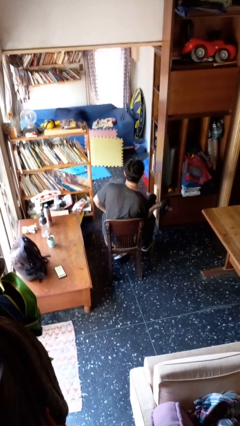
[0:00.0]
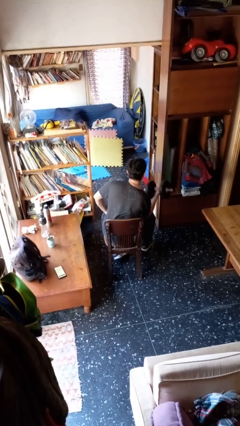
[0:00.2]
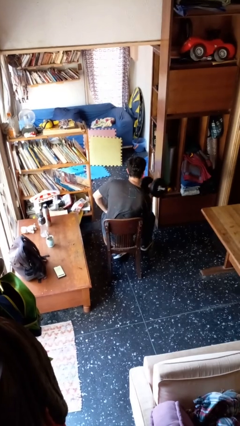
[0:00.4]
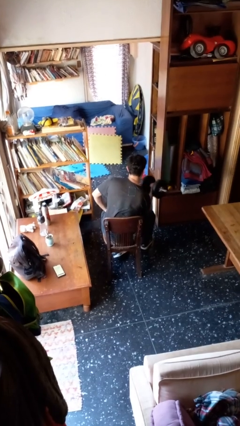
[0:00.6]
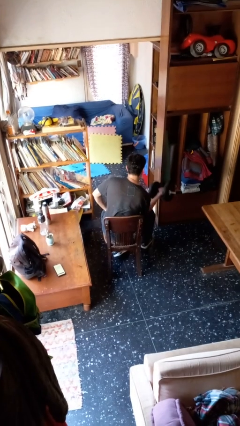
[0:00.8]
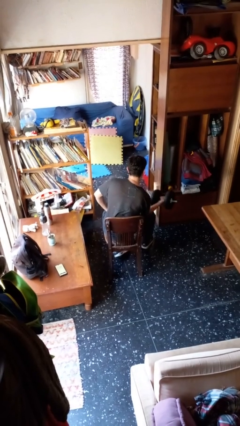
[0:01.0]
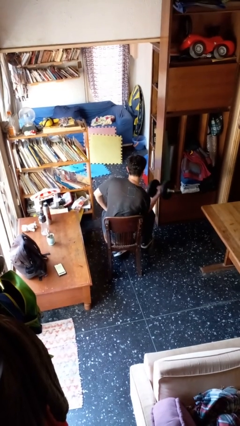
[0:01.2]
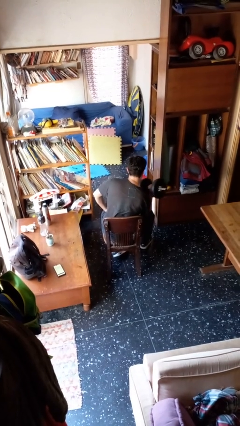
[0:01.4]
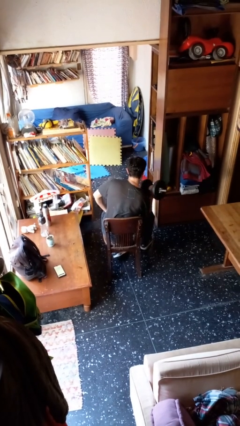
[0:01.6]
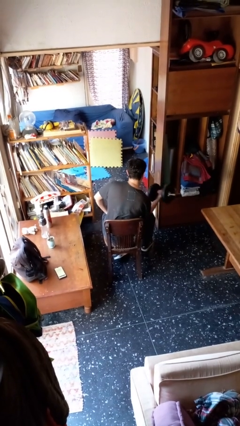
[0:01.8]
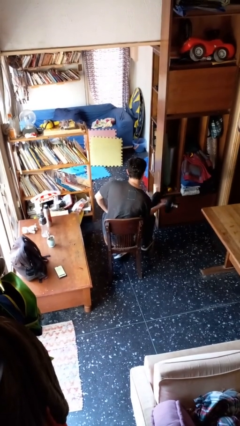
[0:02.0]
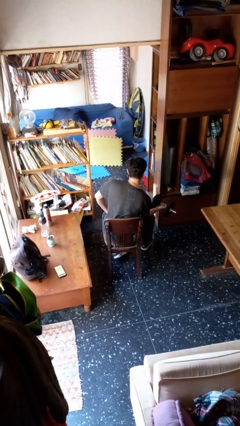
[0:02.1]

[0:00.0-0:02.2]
person lifts dumbbells

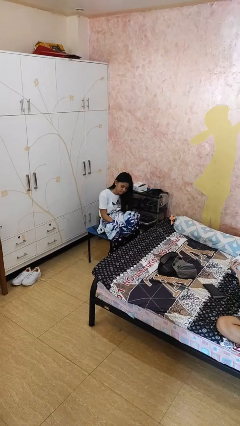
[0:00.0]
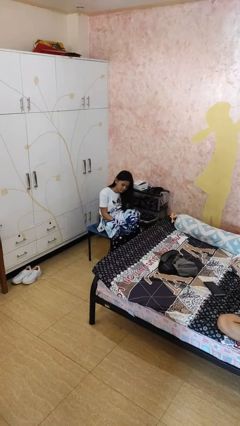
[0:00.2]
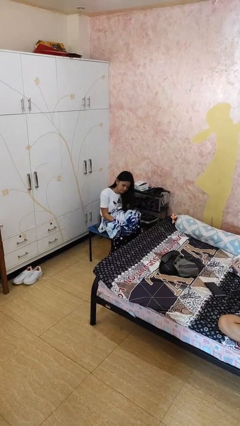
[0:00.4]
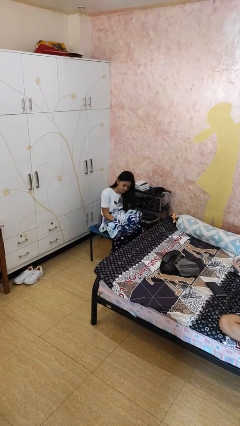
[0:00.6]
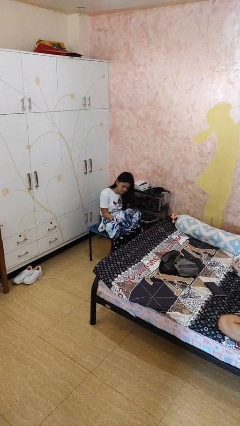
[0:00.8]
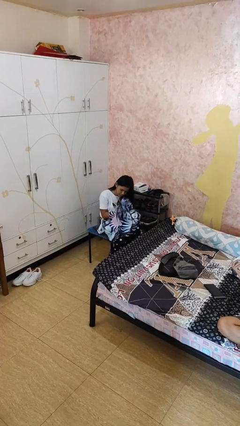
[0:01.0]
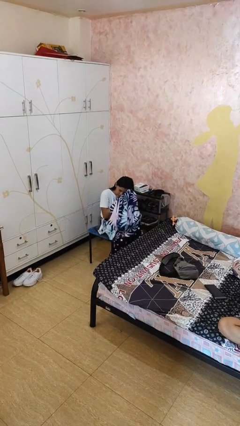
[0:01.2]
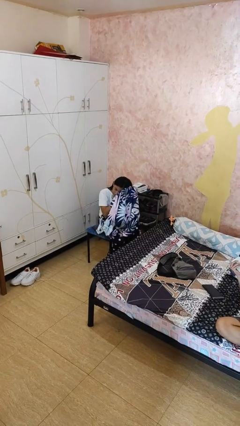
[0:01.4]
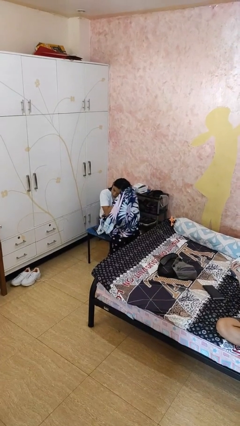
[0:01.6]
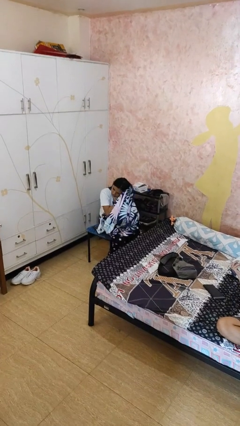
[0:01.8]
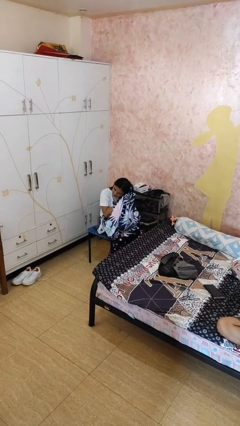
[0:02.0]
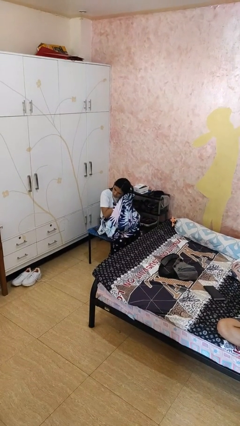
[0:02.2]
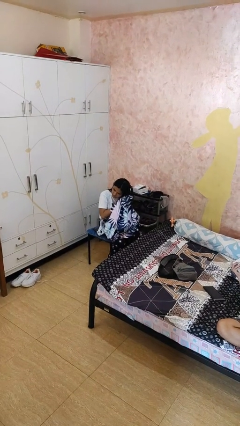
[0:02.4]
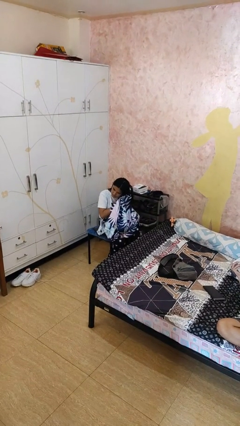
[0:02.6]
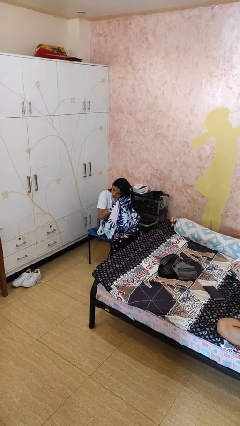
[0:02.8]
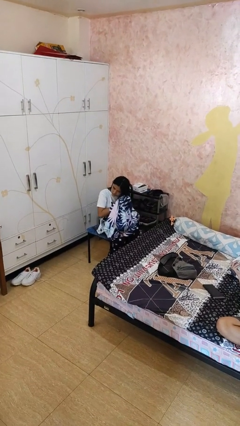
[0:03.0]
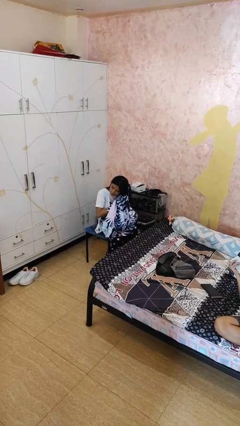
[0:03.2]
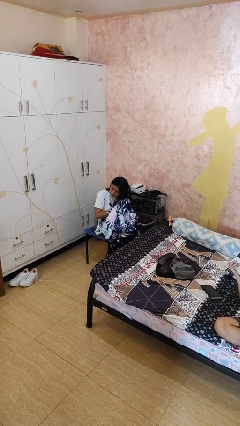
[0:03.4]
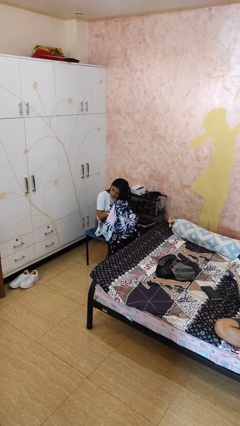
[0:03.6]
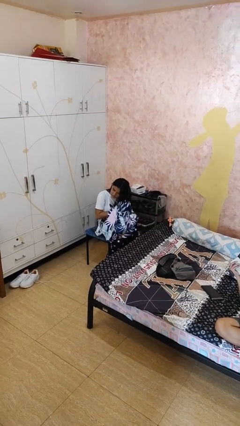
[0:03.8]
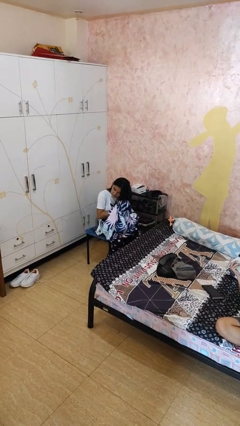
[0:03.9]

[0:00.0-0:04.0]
person dries hair with towel

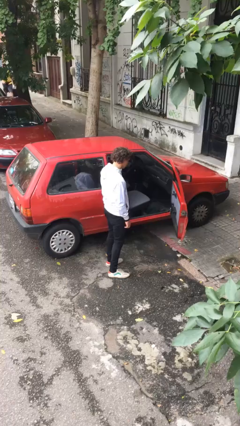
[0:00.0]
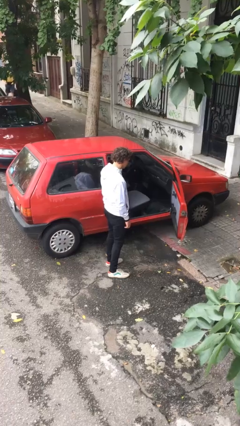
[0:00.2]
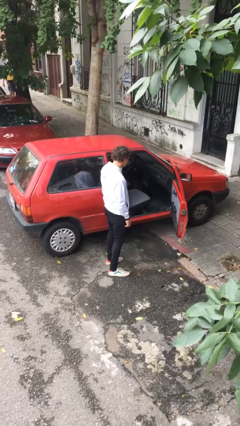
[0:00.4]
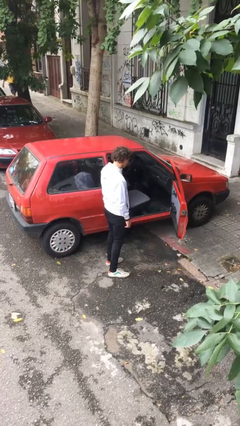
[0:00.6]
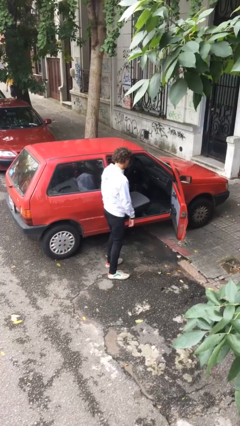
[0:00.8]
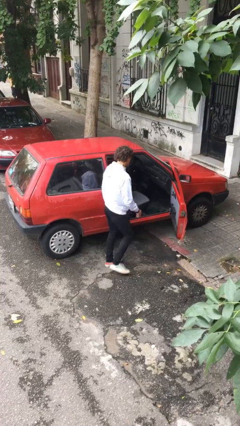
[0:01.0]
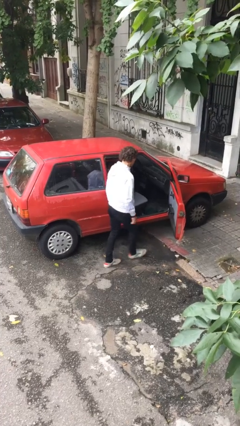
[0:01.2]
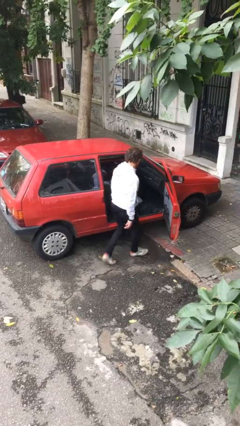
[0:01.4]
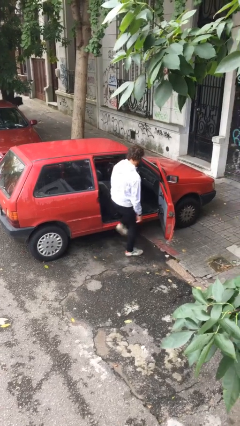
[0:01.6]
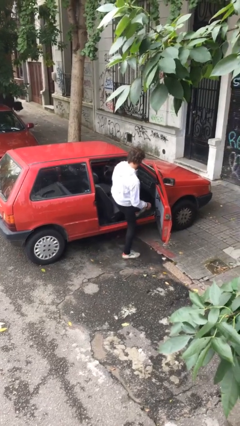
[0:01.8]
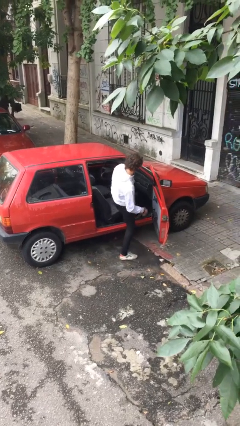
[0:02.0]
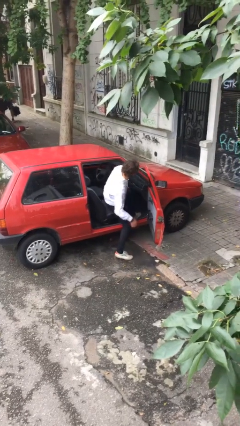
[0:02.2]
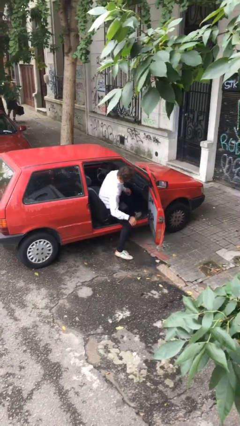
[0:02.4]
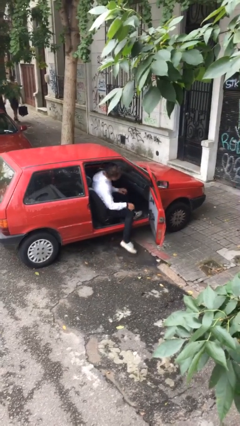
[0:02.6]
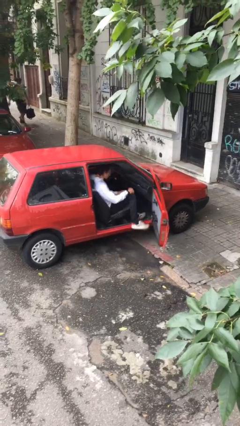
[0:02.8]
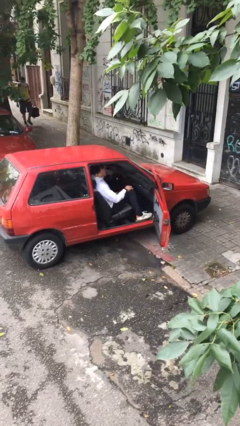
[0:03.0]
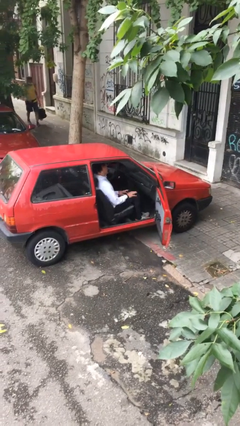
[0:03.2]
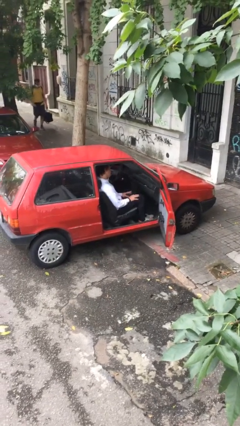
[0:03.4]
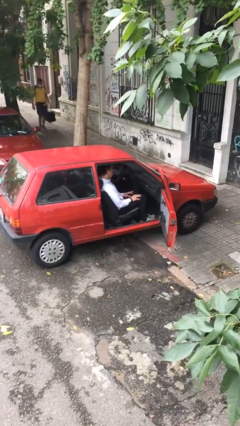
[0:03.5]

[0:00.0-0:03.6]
person enters car

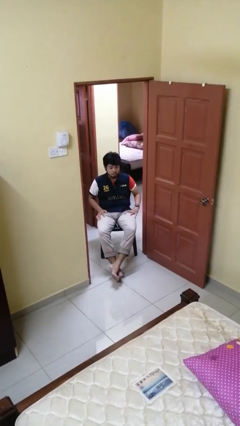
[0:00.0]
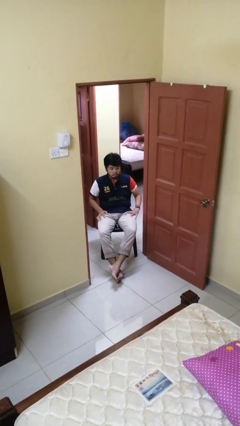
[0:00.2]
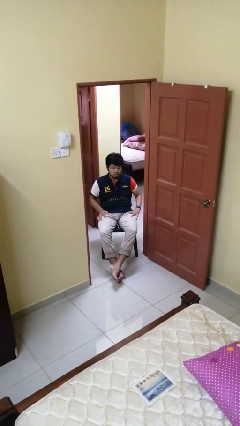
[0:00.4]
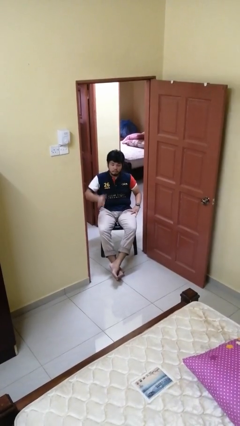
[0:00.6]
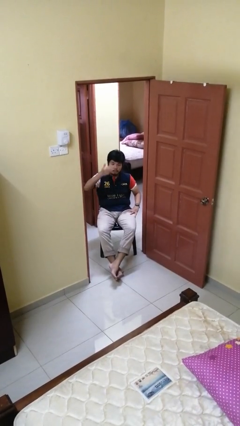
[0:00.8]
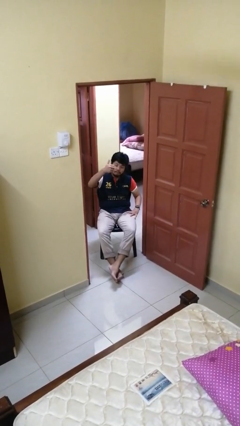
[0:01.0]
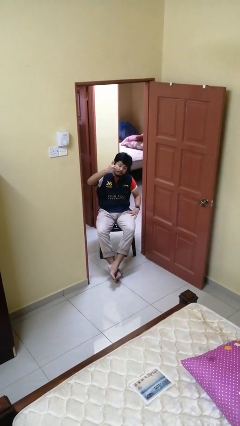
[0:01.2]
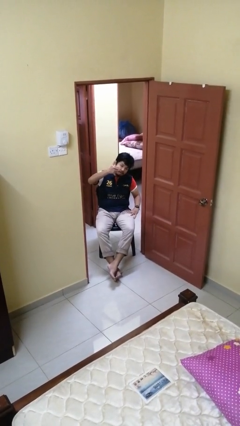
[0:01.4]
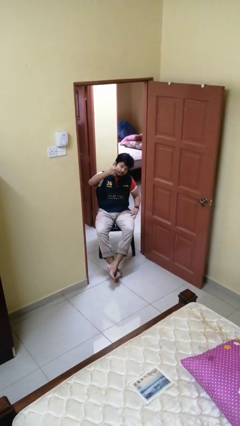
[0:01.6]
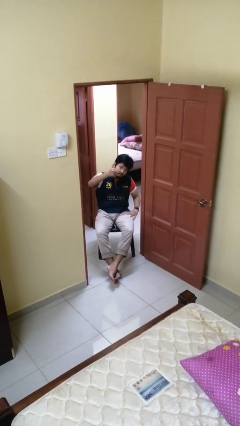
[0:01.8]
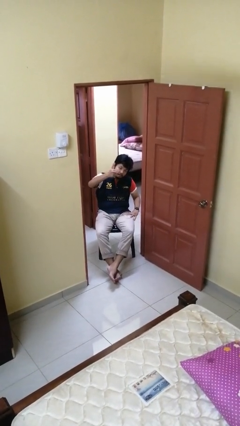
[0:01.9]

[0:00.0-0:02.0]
person gestures thumbs up

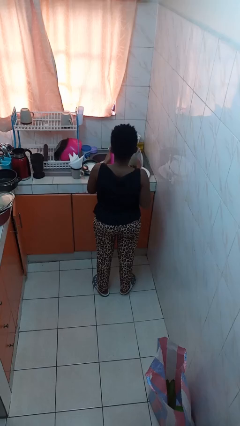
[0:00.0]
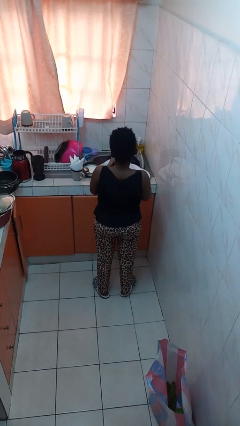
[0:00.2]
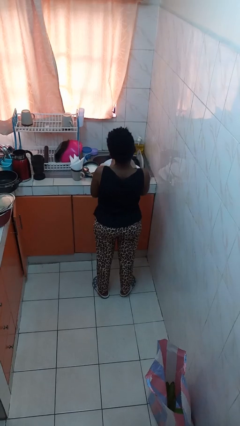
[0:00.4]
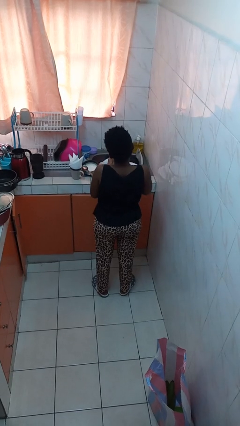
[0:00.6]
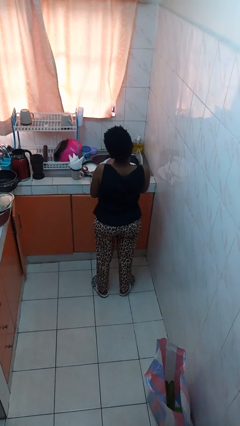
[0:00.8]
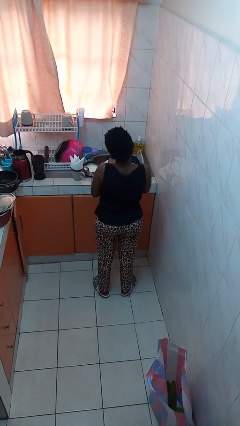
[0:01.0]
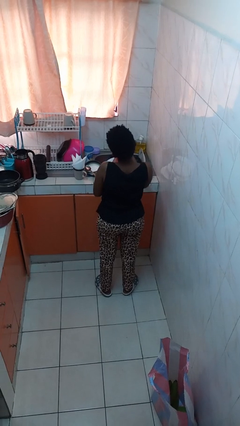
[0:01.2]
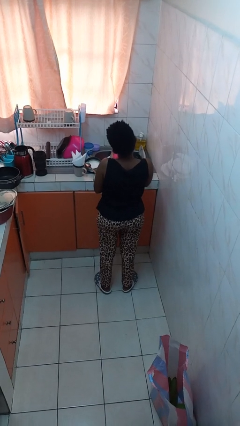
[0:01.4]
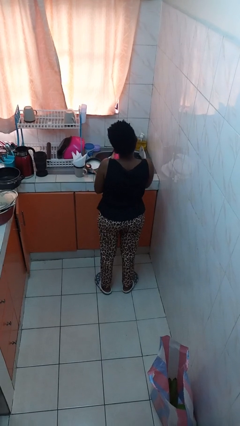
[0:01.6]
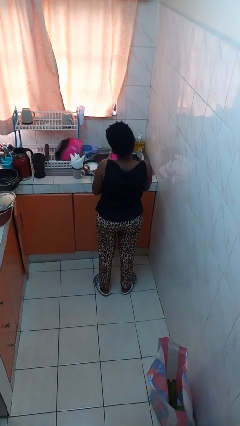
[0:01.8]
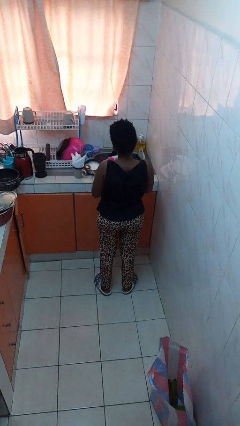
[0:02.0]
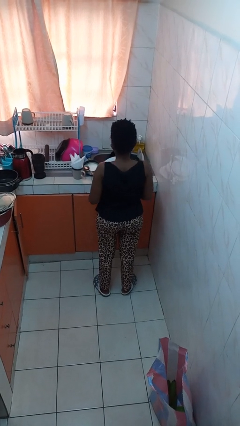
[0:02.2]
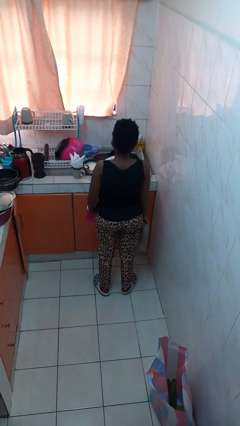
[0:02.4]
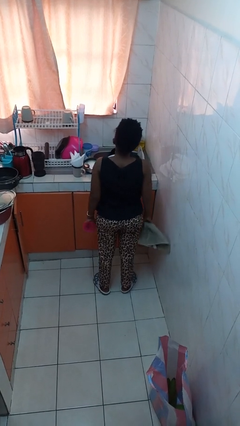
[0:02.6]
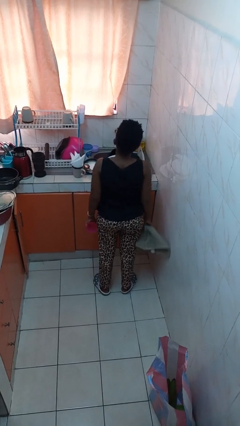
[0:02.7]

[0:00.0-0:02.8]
person dries dish

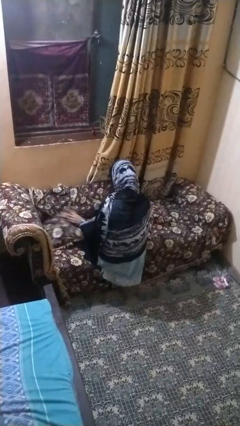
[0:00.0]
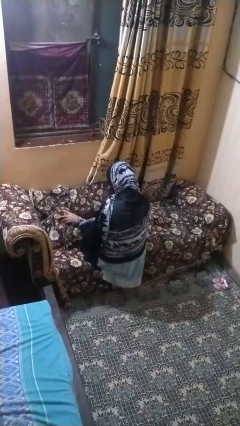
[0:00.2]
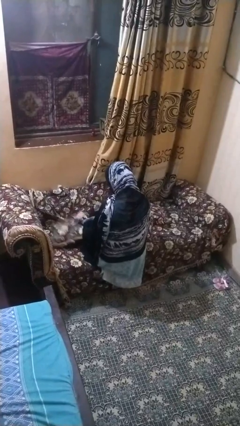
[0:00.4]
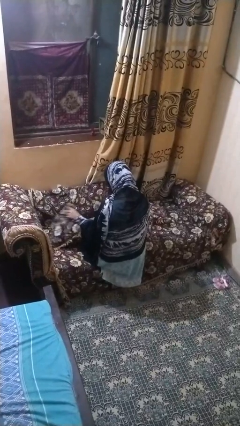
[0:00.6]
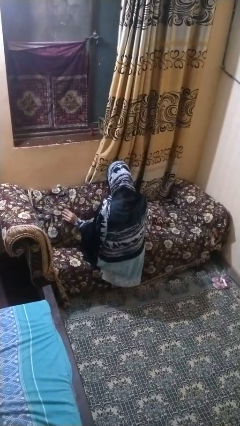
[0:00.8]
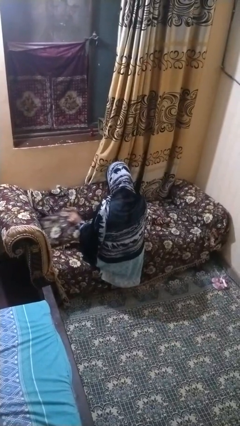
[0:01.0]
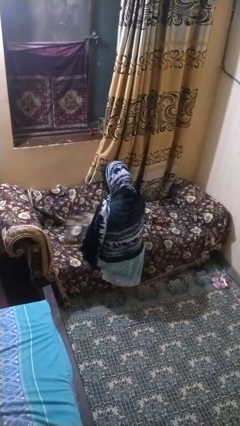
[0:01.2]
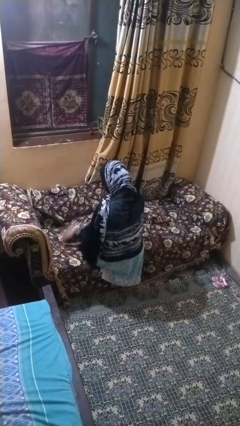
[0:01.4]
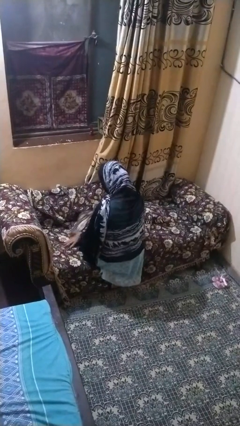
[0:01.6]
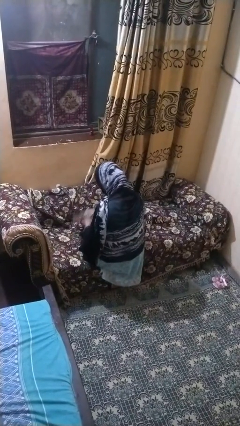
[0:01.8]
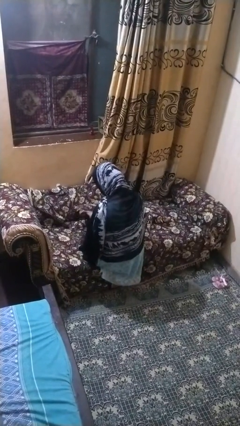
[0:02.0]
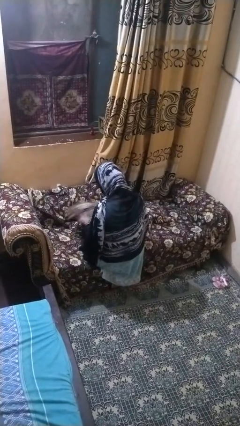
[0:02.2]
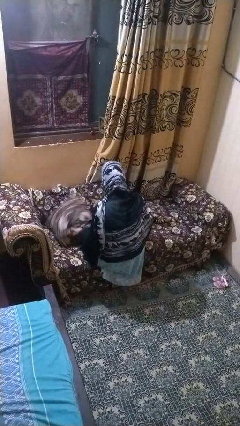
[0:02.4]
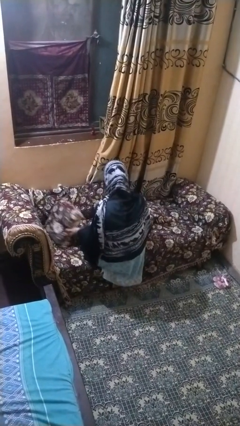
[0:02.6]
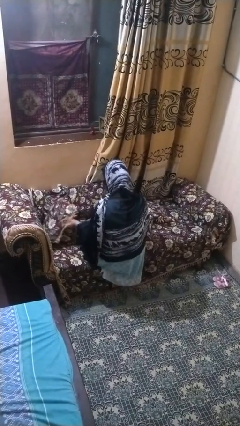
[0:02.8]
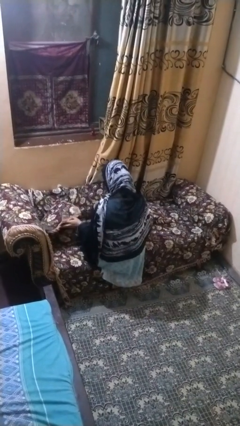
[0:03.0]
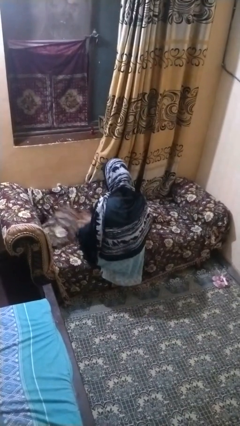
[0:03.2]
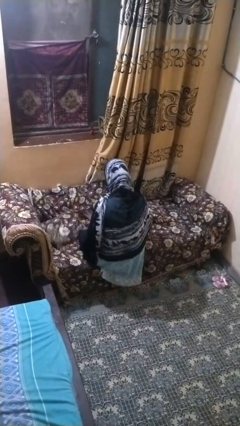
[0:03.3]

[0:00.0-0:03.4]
person searches in couch
